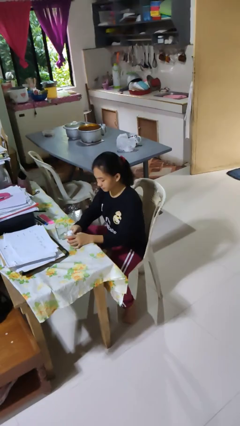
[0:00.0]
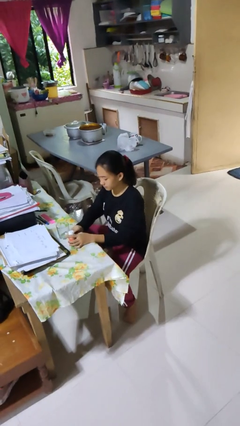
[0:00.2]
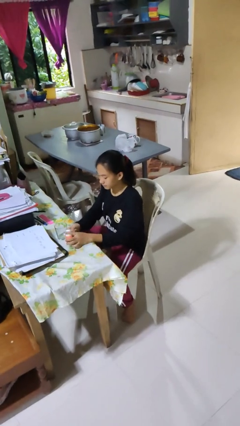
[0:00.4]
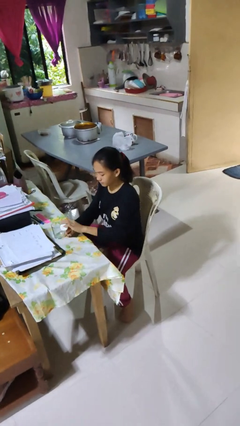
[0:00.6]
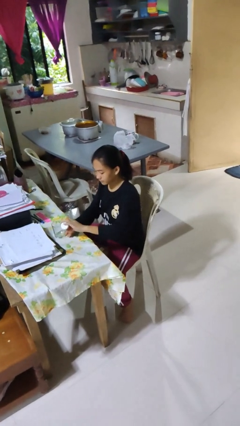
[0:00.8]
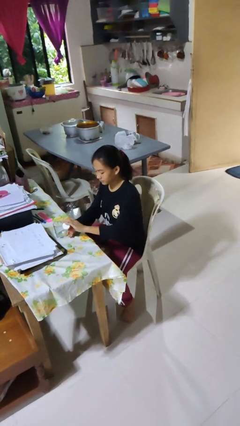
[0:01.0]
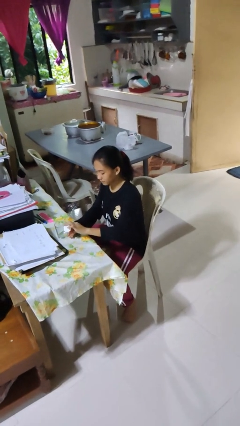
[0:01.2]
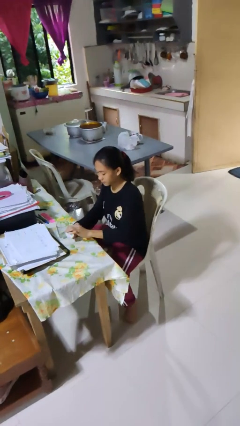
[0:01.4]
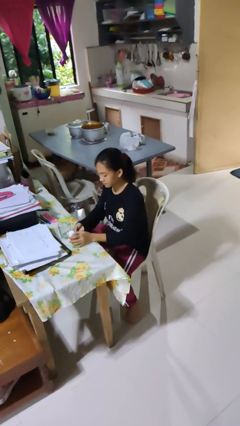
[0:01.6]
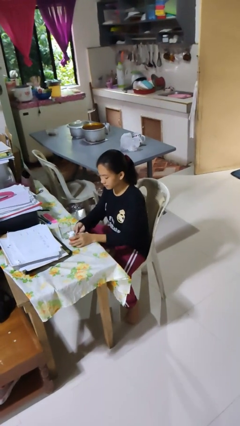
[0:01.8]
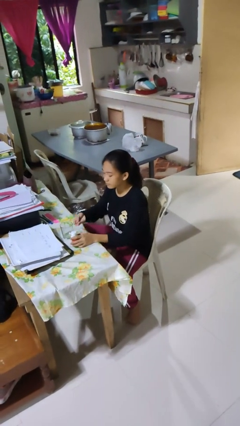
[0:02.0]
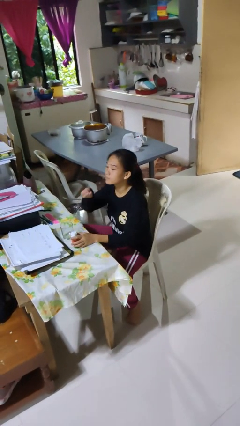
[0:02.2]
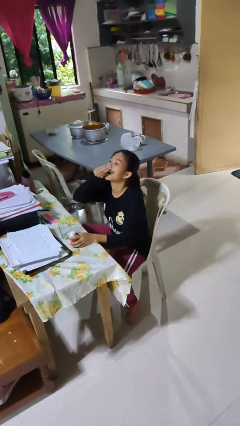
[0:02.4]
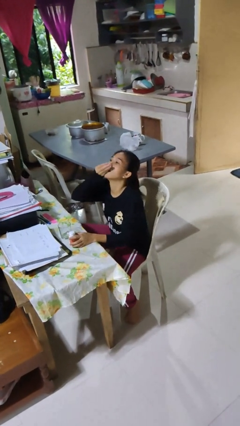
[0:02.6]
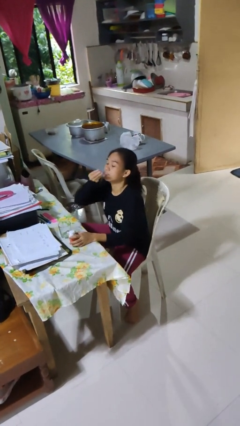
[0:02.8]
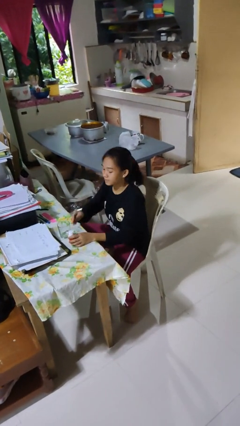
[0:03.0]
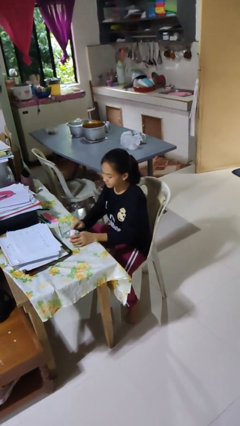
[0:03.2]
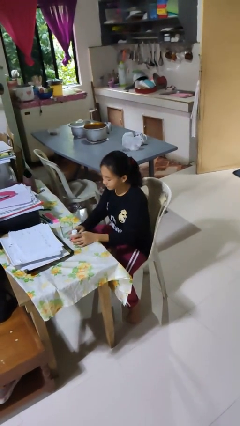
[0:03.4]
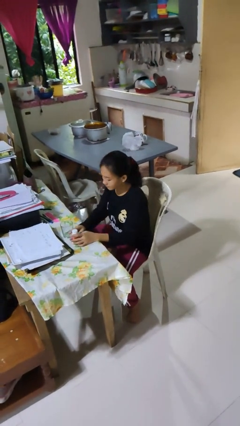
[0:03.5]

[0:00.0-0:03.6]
person takes medicine pills

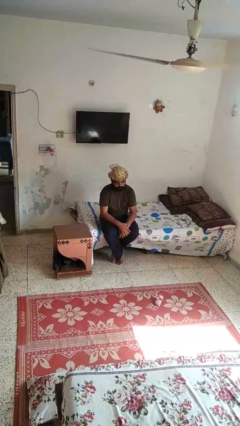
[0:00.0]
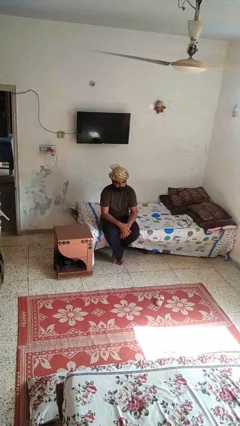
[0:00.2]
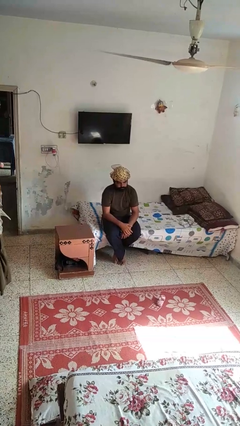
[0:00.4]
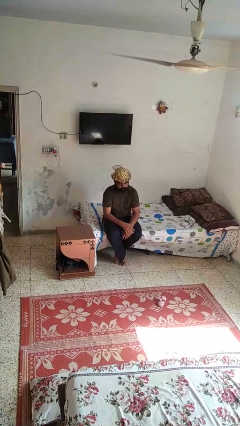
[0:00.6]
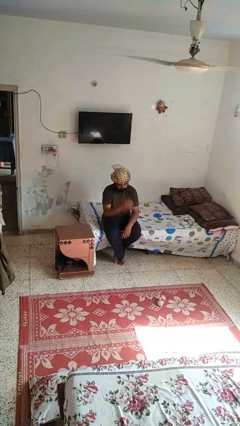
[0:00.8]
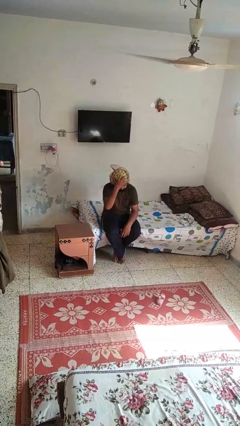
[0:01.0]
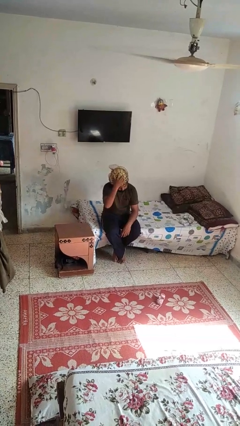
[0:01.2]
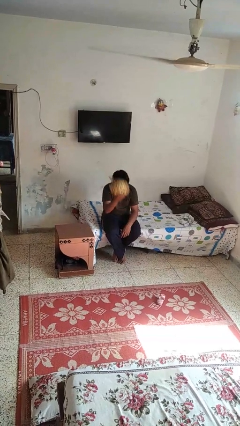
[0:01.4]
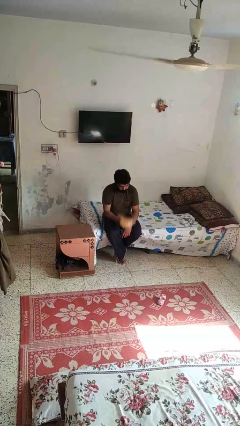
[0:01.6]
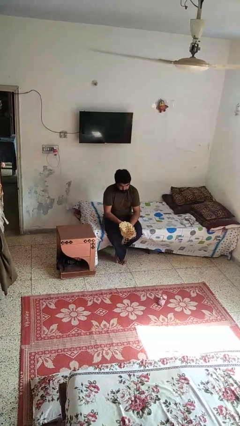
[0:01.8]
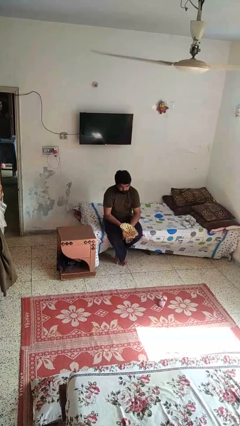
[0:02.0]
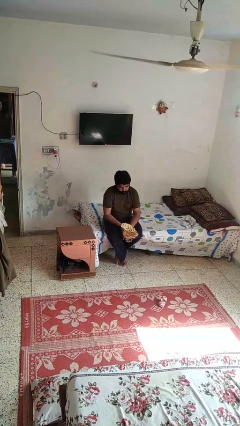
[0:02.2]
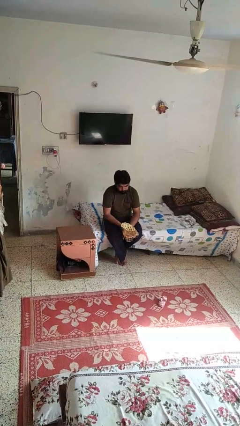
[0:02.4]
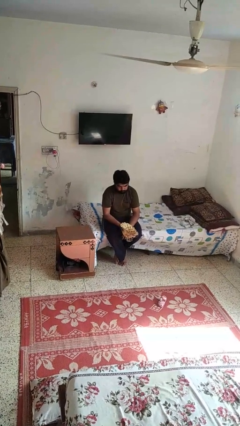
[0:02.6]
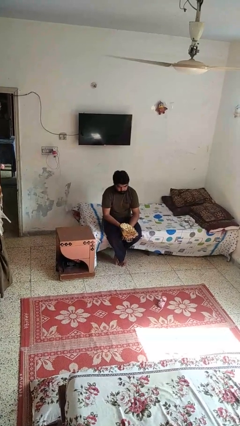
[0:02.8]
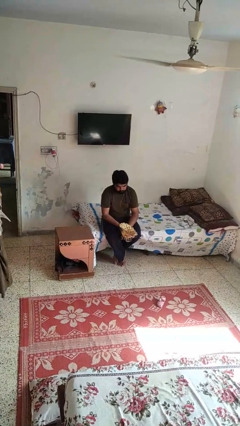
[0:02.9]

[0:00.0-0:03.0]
person takes off hat

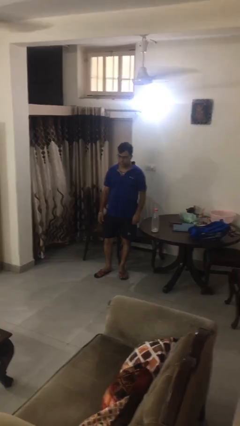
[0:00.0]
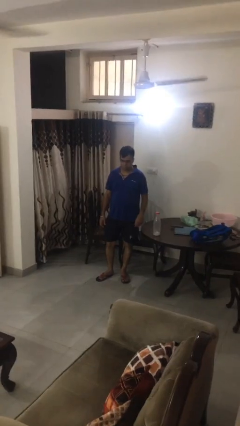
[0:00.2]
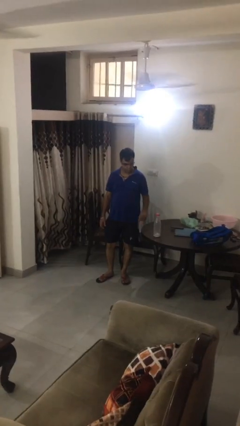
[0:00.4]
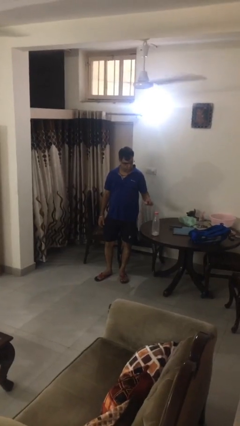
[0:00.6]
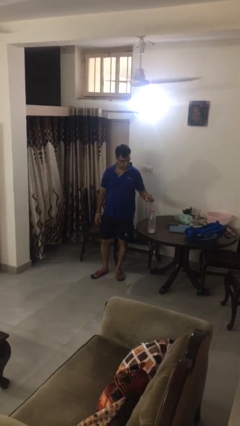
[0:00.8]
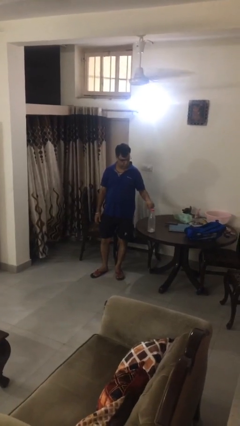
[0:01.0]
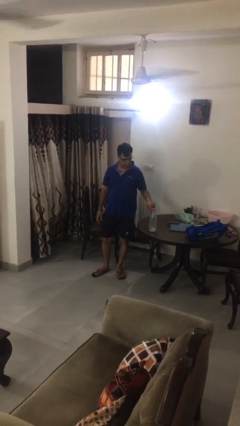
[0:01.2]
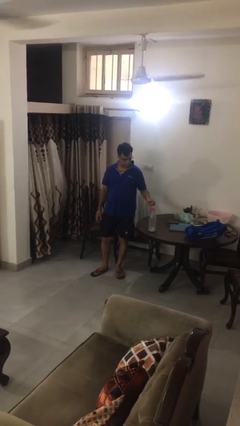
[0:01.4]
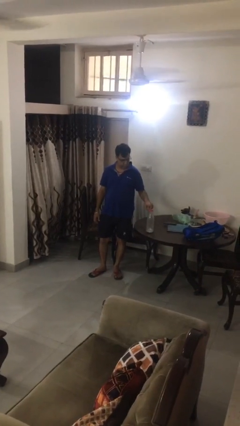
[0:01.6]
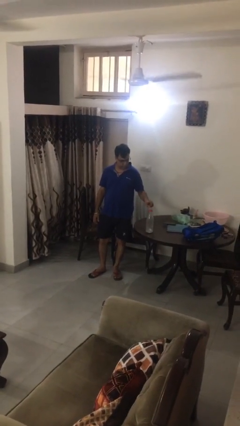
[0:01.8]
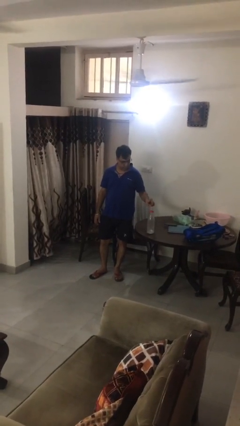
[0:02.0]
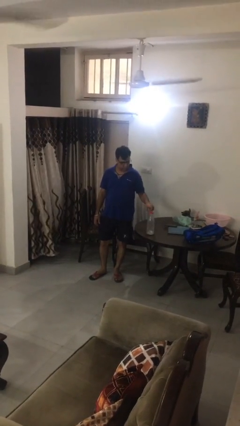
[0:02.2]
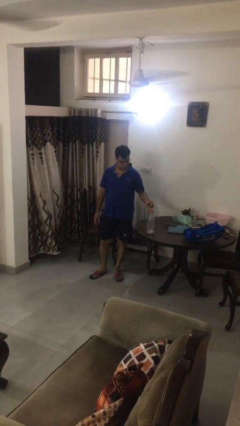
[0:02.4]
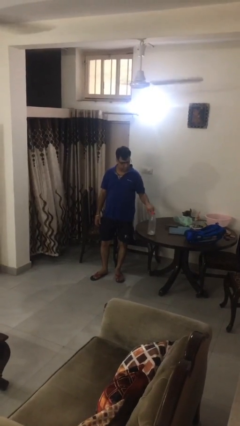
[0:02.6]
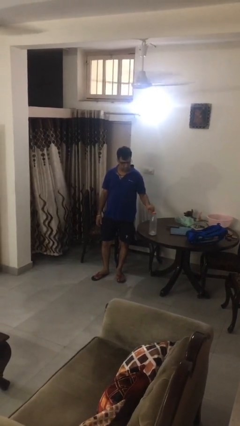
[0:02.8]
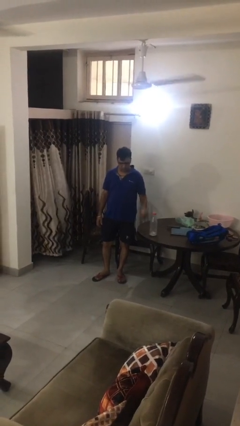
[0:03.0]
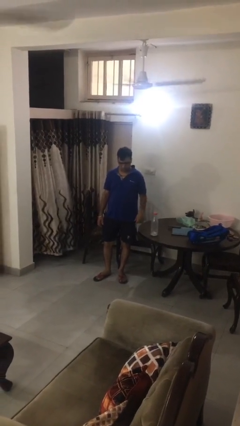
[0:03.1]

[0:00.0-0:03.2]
person taps object with finger

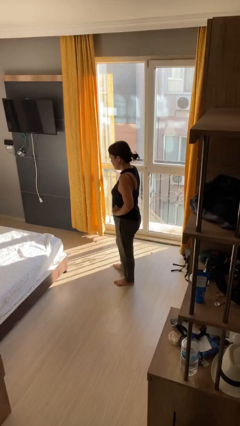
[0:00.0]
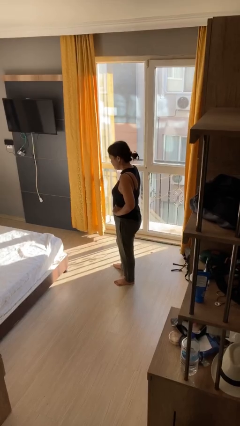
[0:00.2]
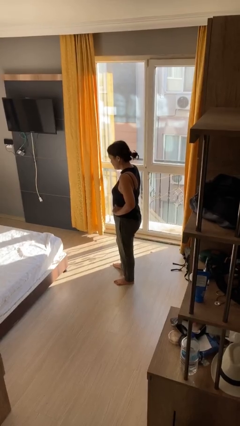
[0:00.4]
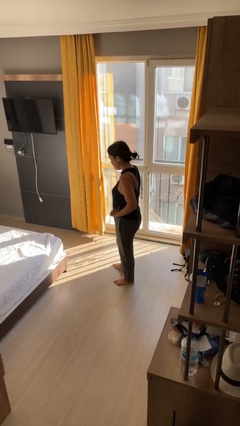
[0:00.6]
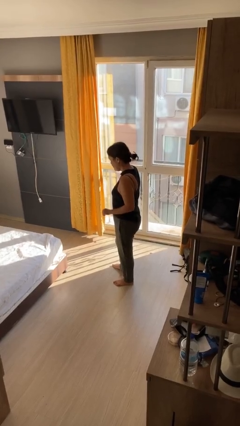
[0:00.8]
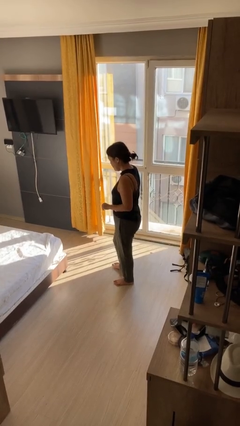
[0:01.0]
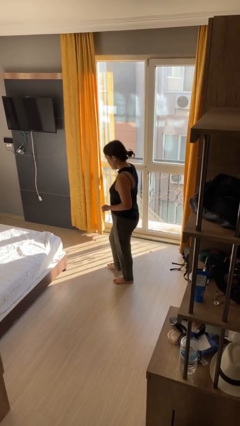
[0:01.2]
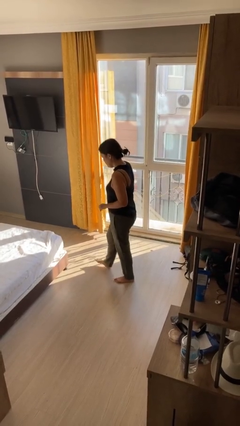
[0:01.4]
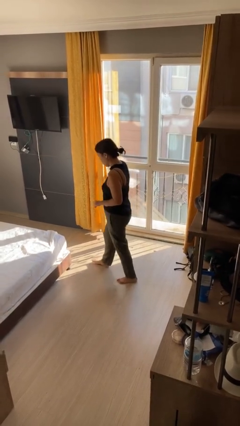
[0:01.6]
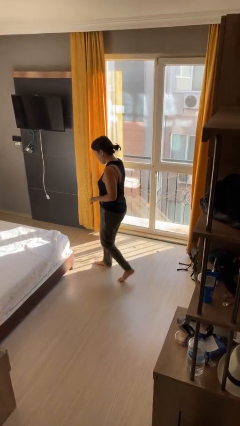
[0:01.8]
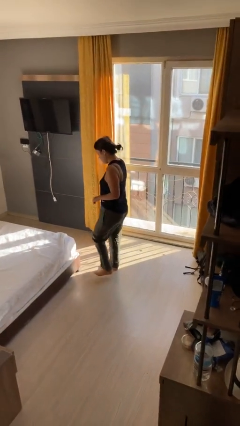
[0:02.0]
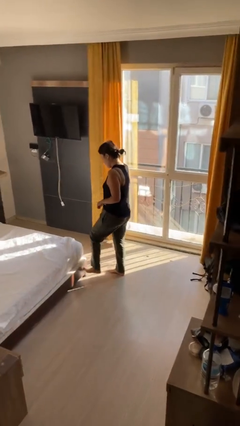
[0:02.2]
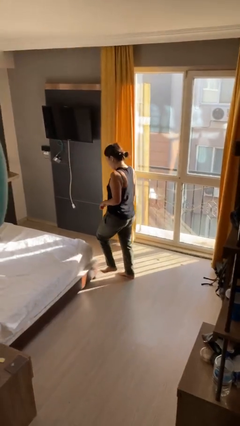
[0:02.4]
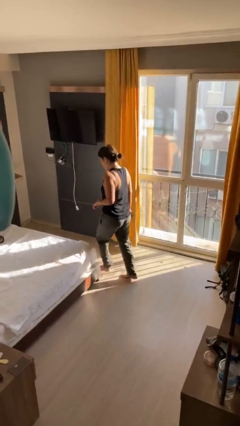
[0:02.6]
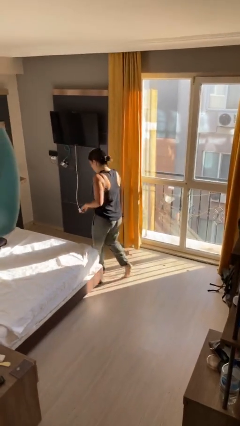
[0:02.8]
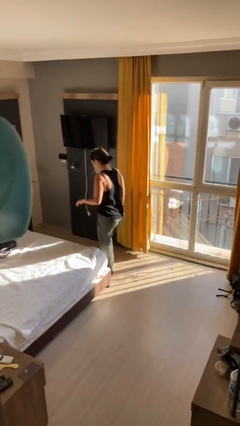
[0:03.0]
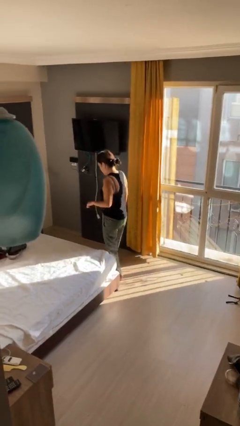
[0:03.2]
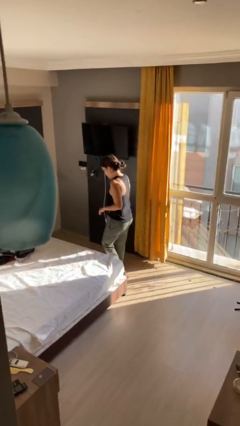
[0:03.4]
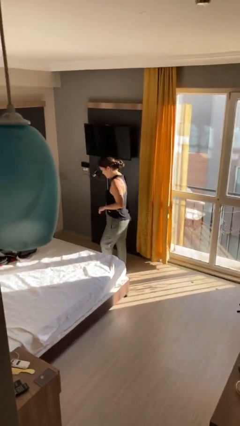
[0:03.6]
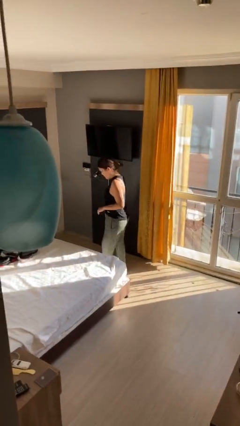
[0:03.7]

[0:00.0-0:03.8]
person stubs toe

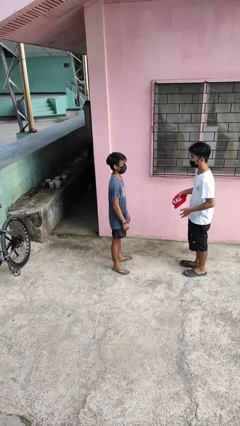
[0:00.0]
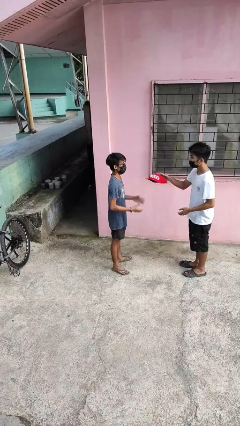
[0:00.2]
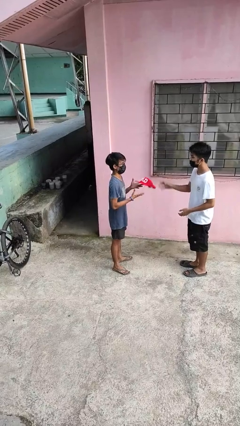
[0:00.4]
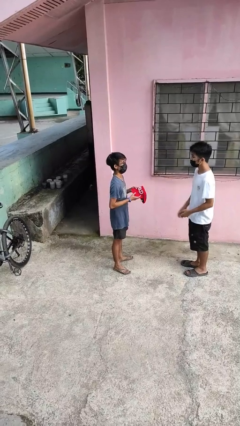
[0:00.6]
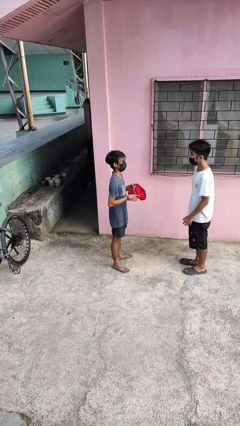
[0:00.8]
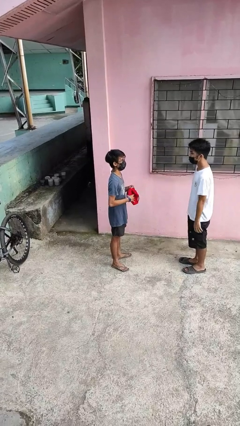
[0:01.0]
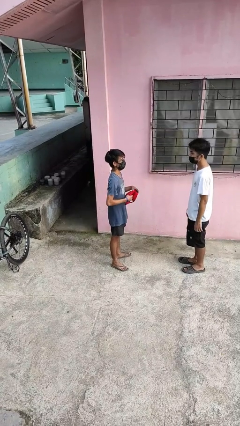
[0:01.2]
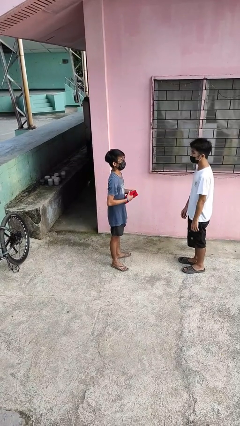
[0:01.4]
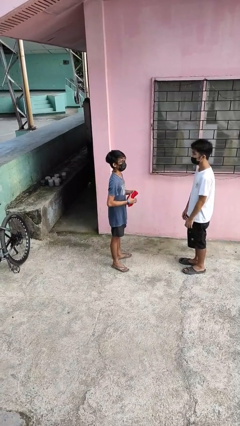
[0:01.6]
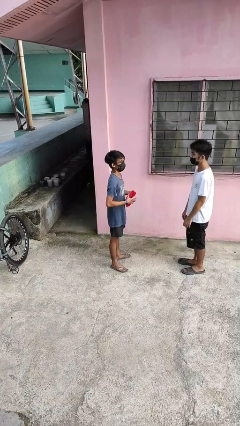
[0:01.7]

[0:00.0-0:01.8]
person catches object from person

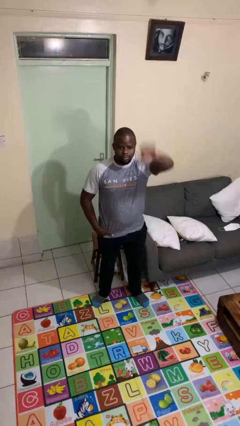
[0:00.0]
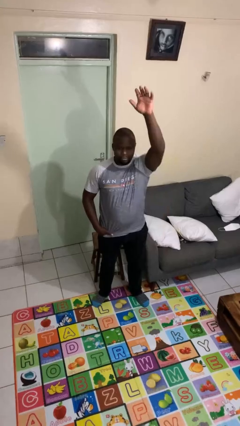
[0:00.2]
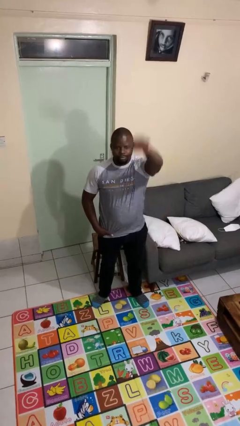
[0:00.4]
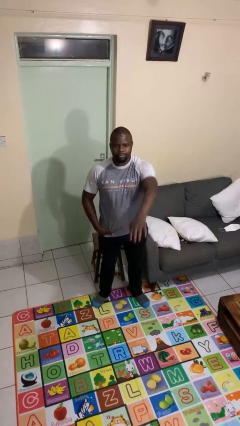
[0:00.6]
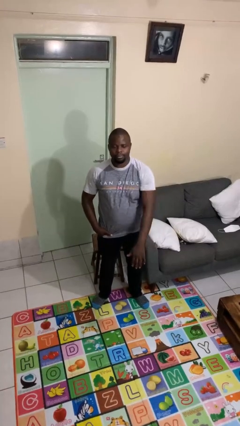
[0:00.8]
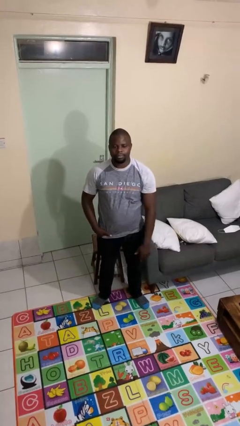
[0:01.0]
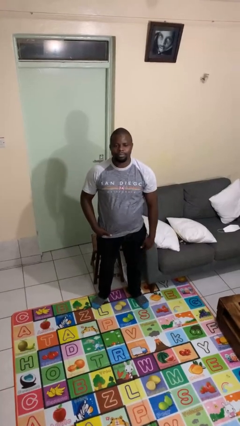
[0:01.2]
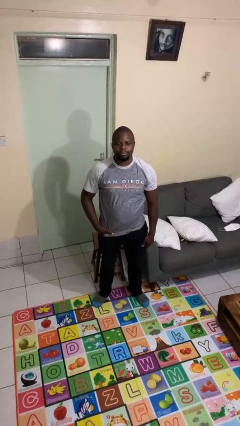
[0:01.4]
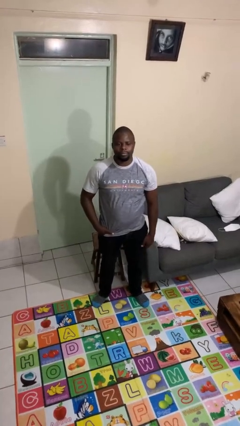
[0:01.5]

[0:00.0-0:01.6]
person gestures swipe down

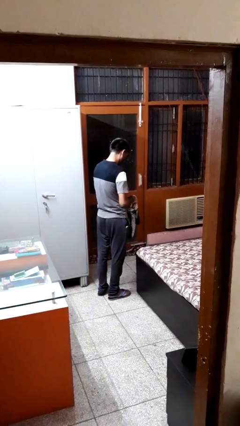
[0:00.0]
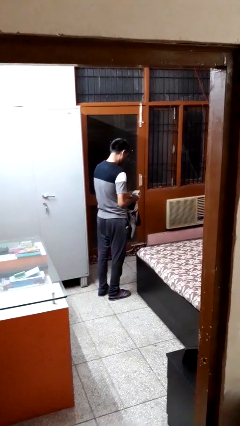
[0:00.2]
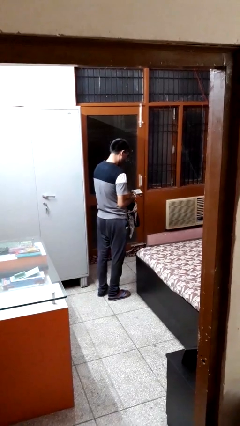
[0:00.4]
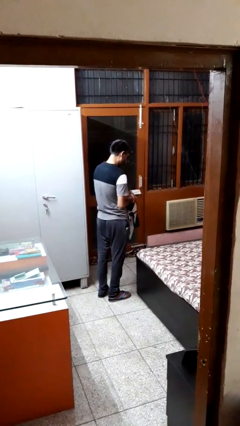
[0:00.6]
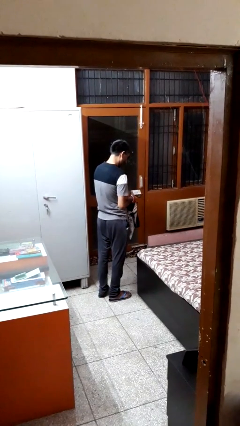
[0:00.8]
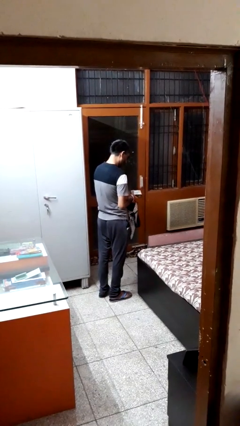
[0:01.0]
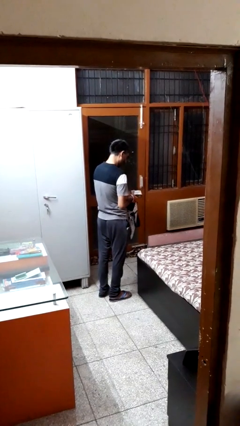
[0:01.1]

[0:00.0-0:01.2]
person takes object from bag
